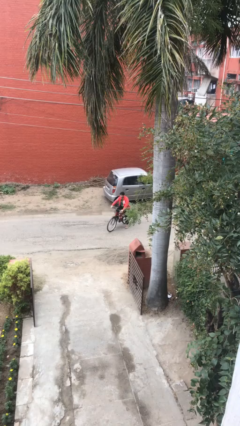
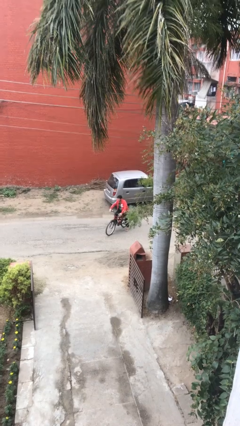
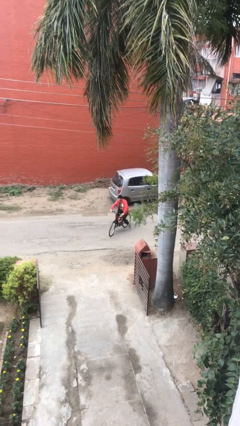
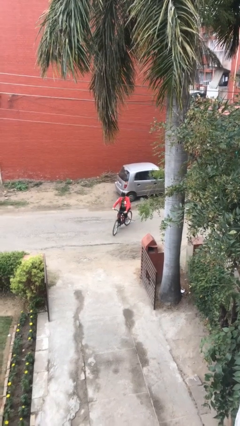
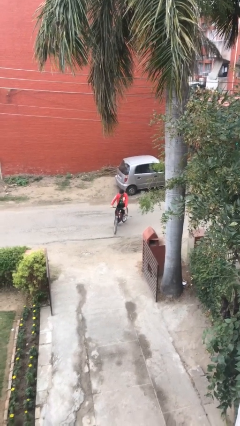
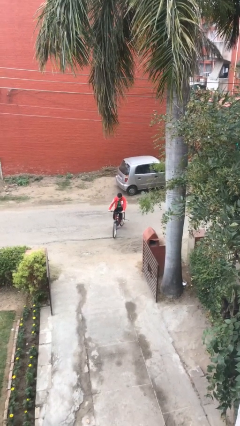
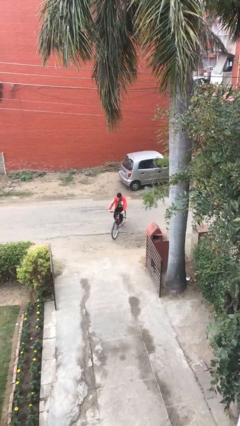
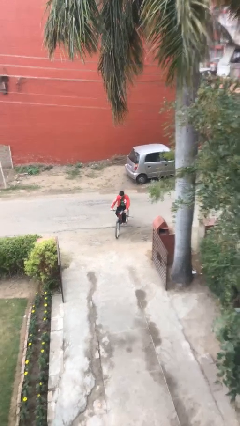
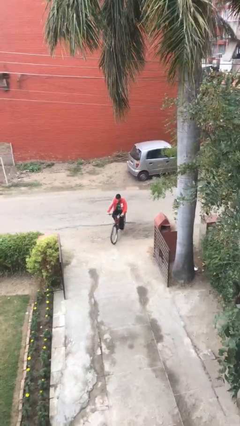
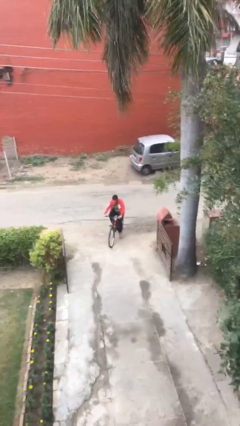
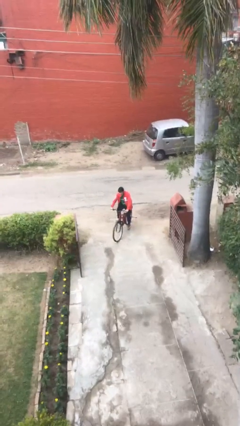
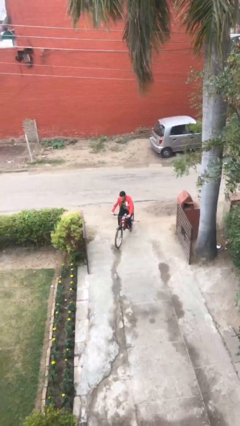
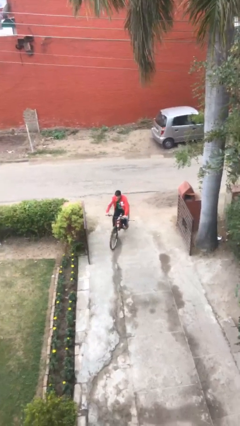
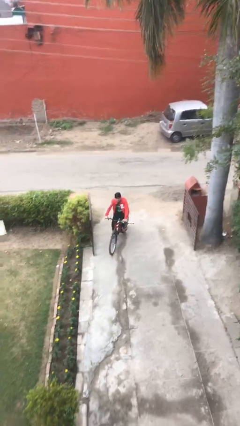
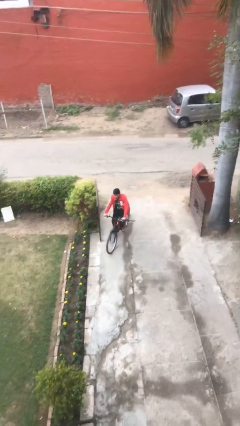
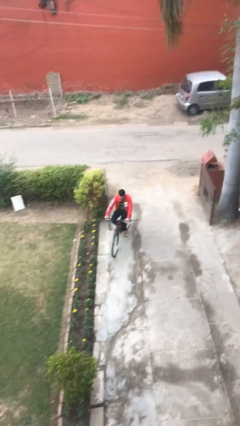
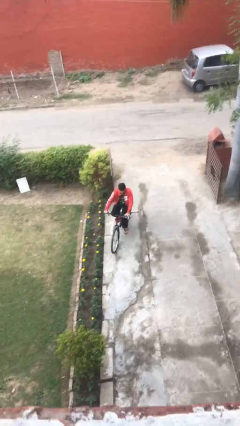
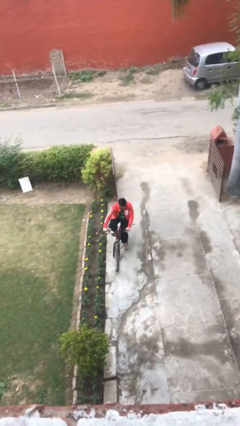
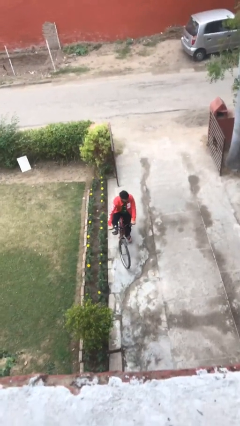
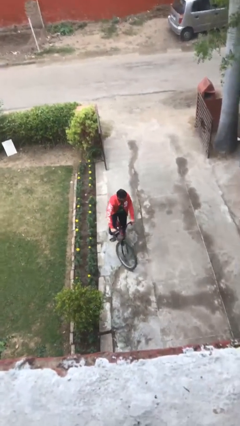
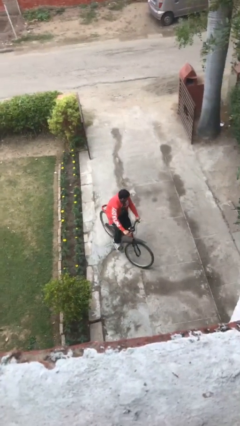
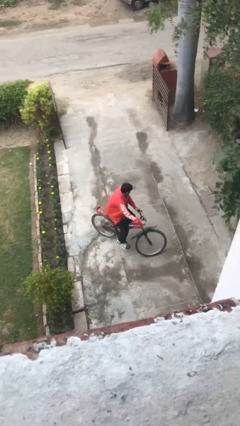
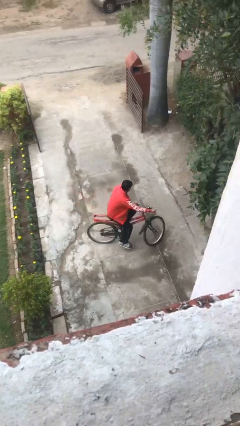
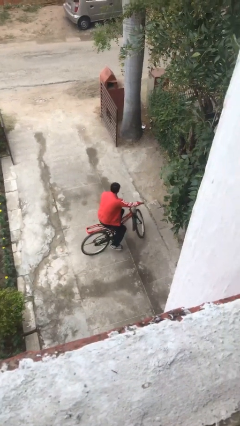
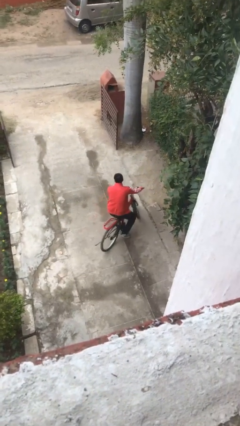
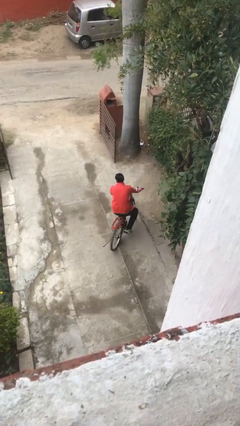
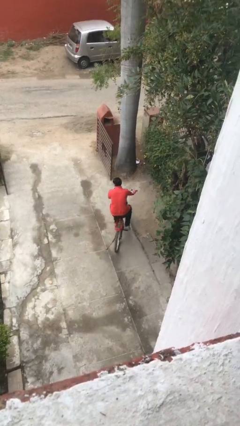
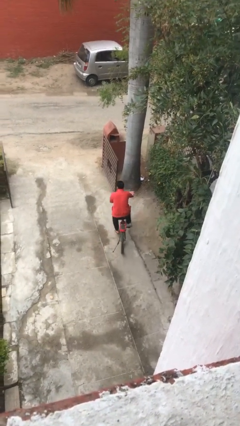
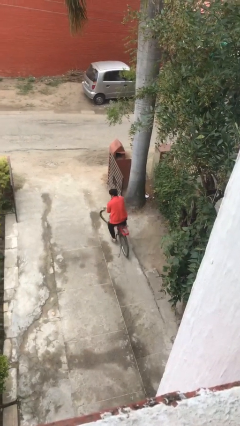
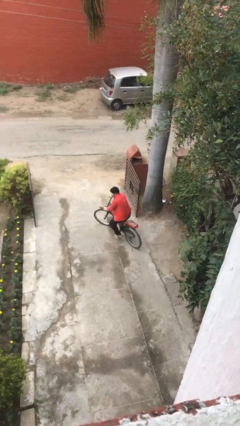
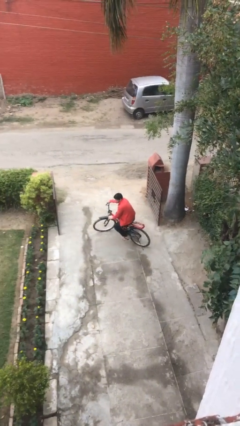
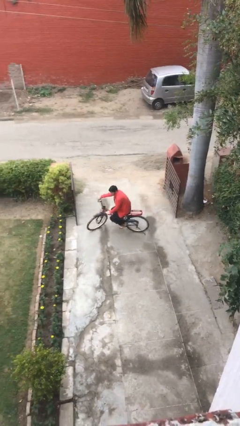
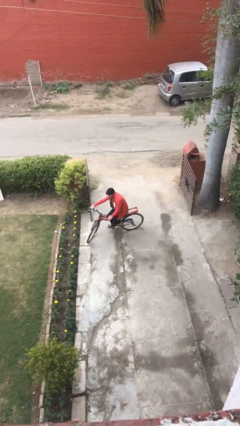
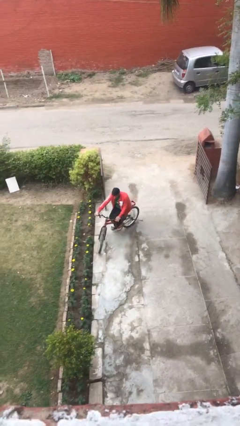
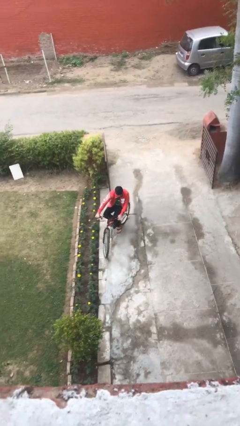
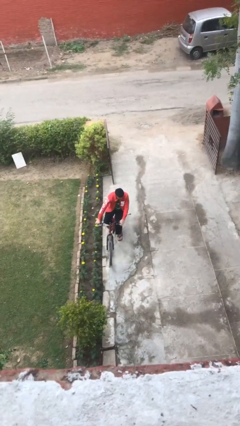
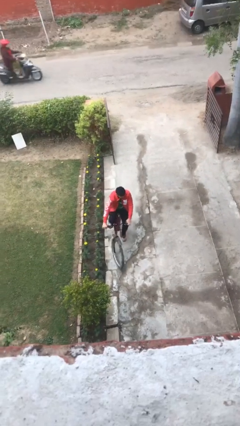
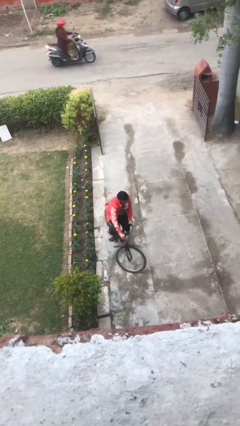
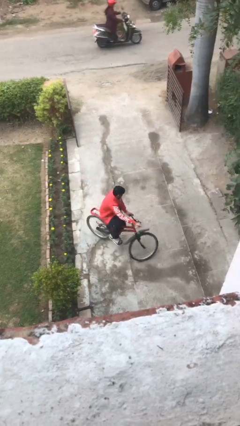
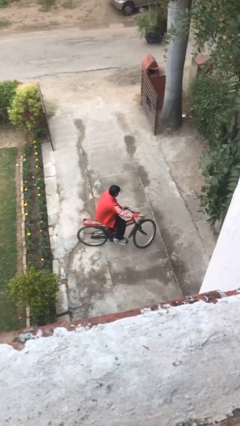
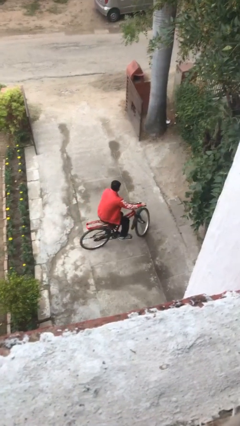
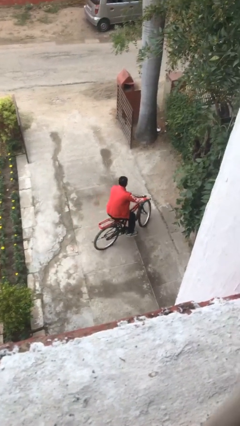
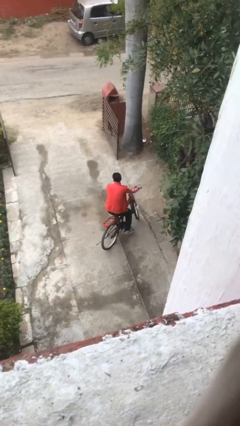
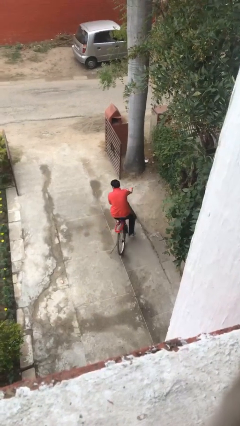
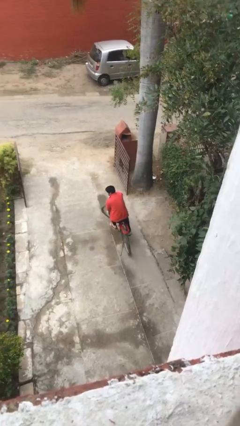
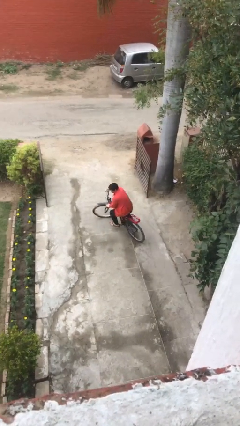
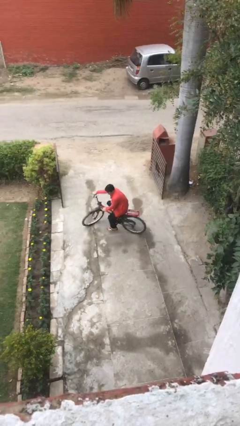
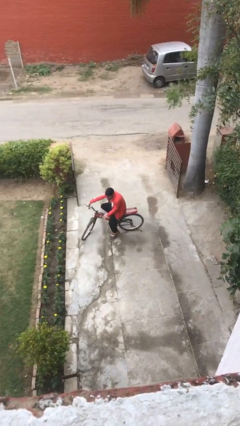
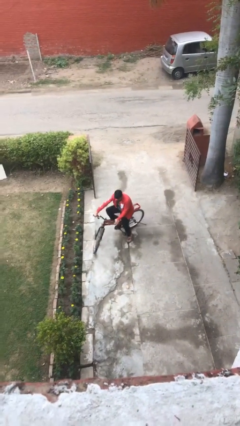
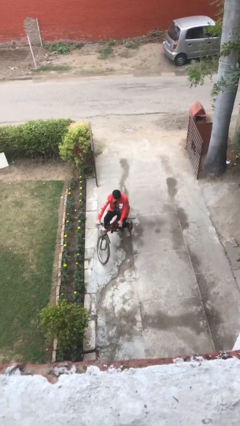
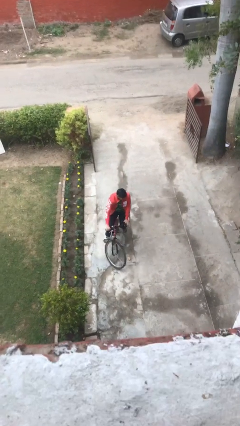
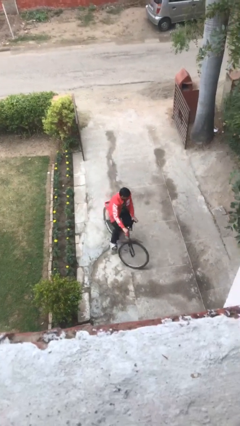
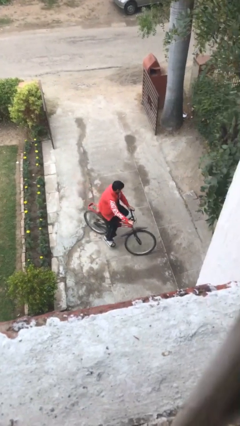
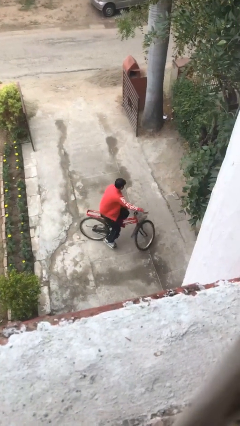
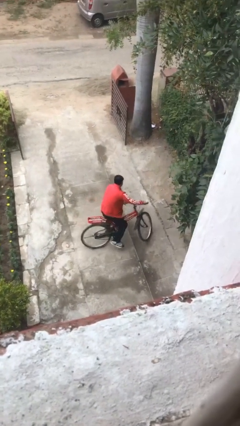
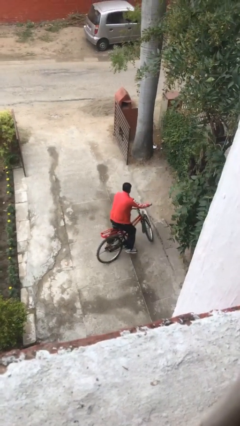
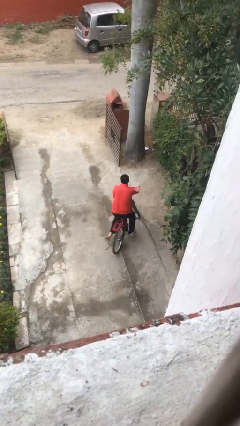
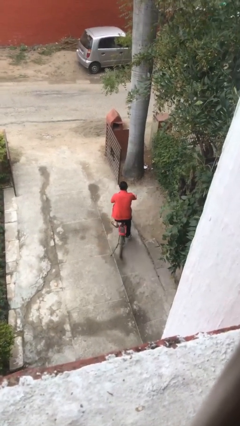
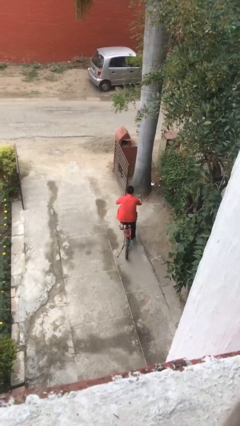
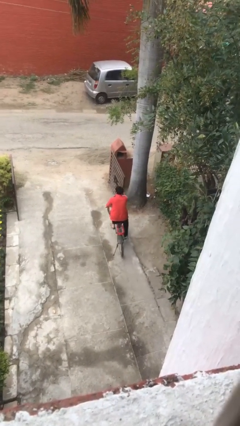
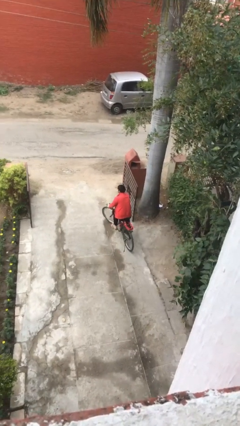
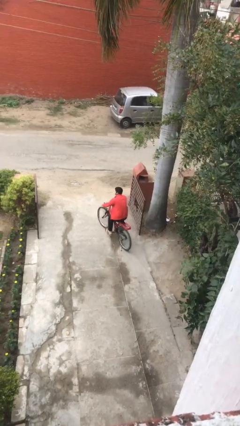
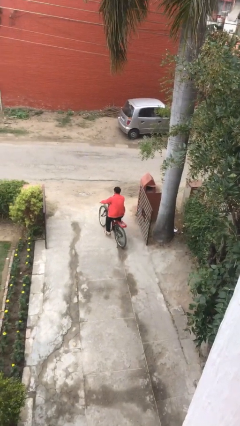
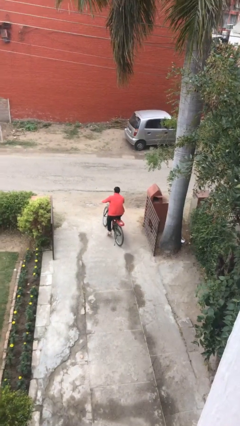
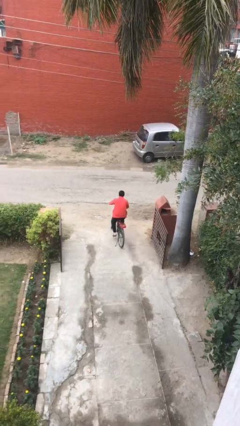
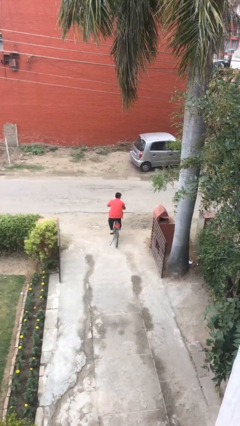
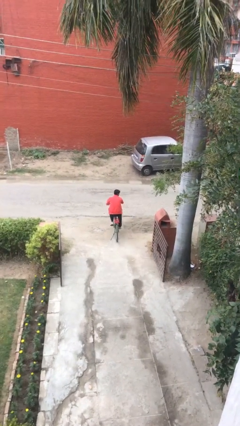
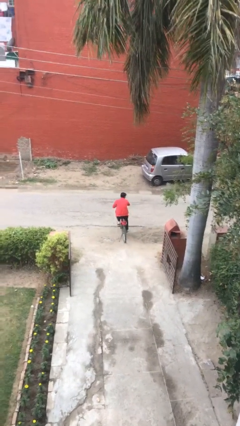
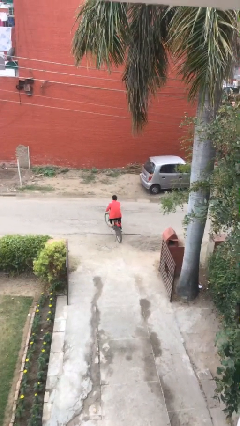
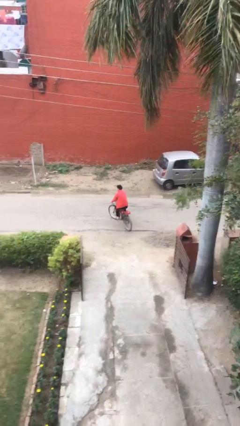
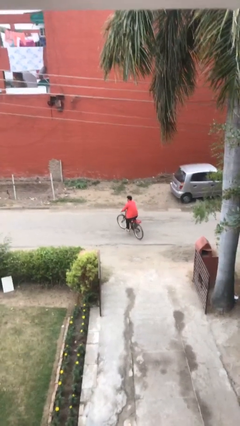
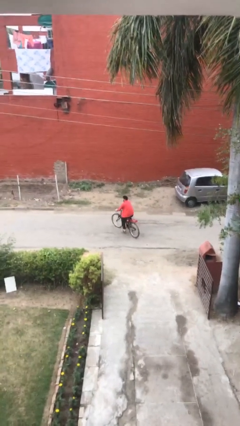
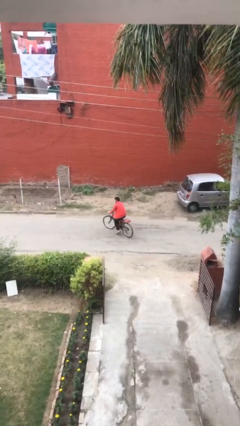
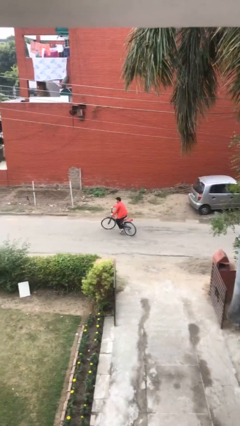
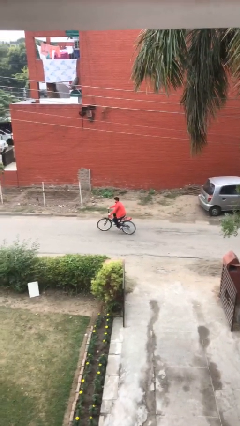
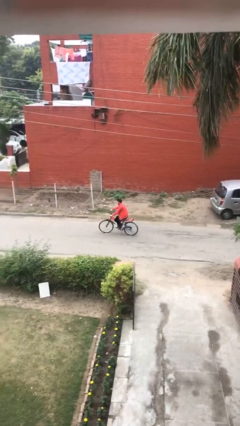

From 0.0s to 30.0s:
person rides bicycle

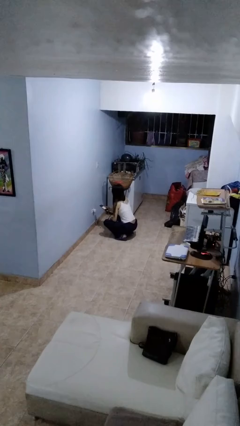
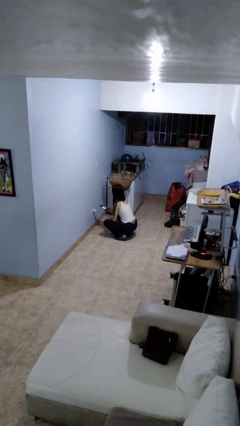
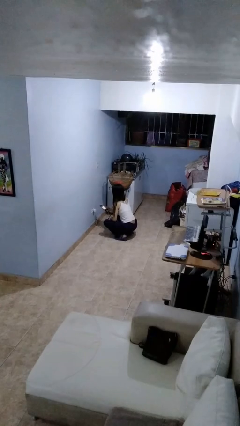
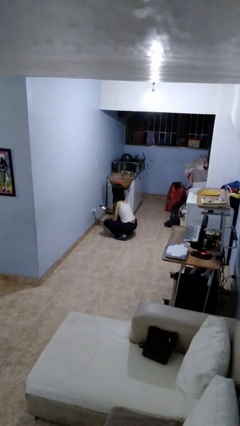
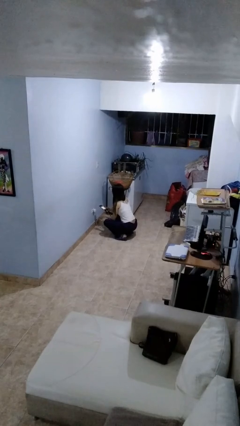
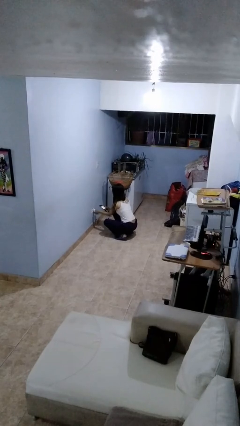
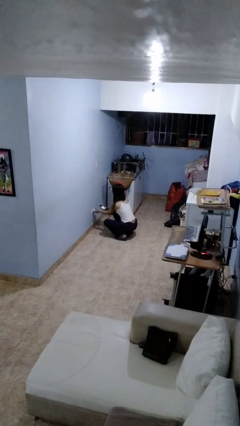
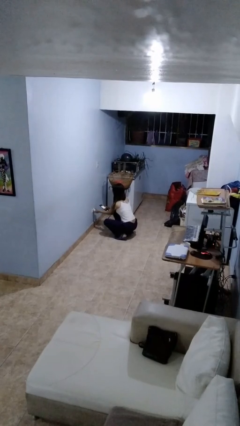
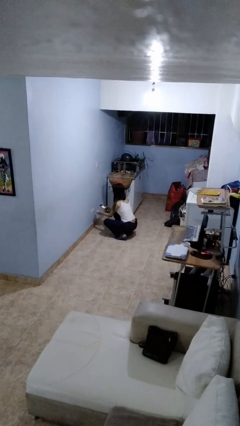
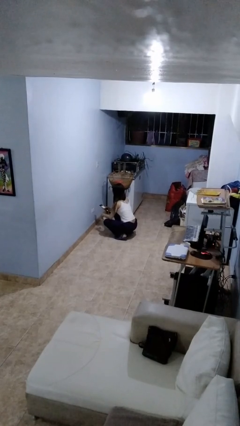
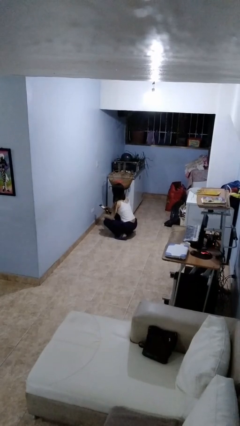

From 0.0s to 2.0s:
person unplugs from electrical socket

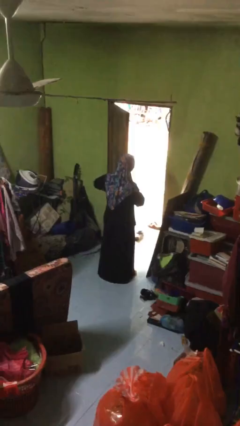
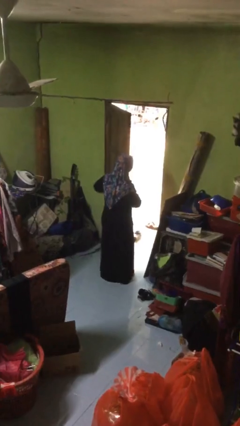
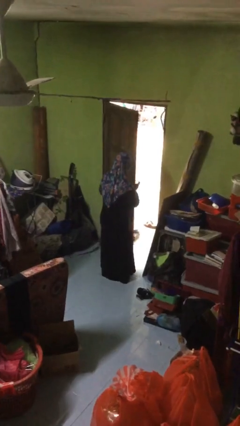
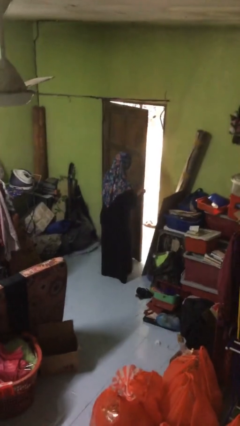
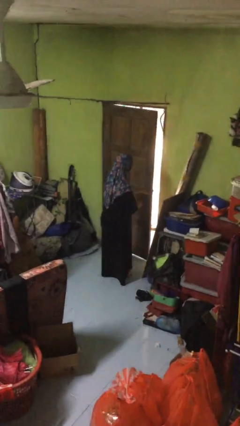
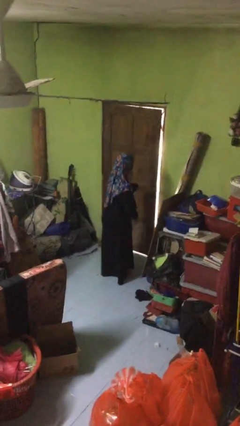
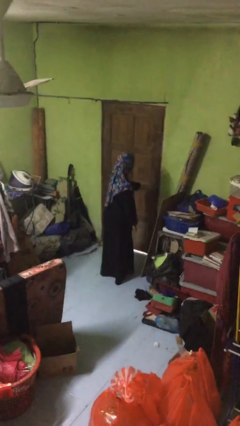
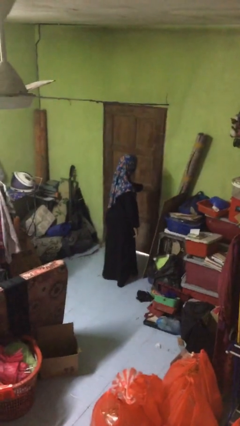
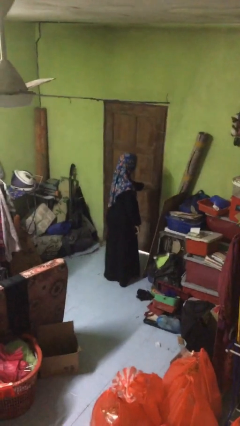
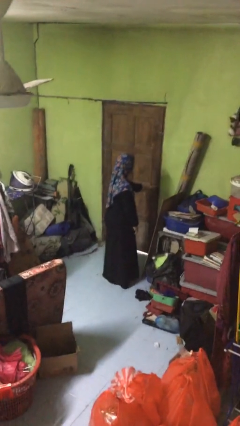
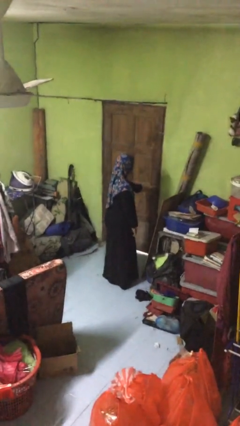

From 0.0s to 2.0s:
person closes facility door
